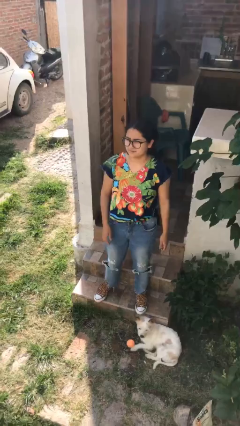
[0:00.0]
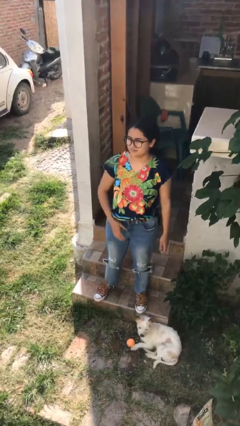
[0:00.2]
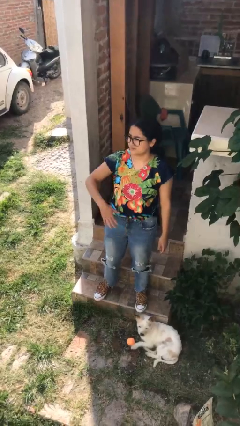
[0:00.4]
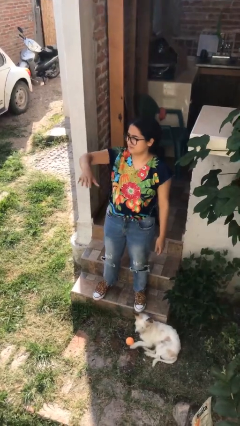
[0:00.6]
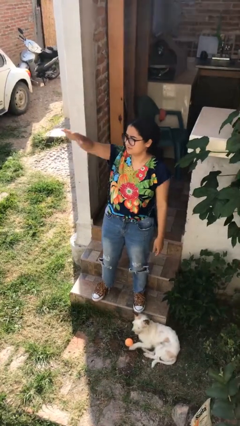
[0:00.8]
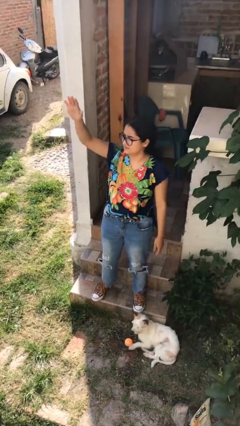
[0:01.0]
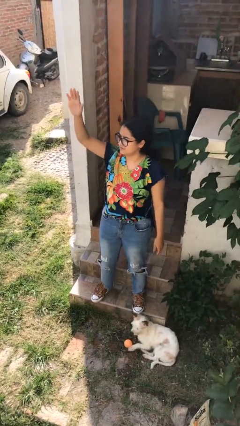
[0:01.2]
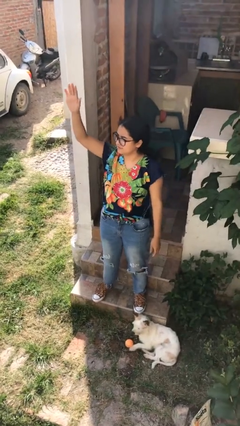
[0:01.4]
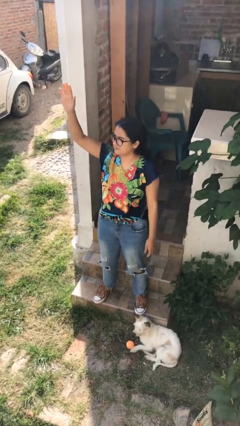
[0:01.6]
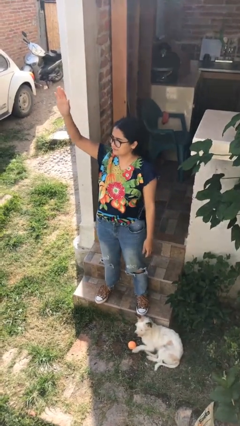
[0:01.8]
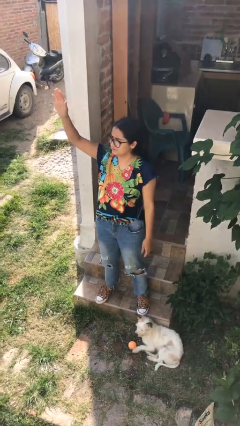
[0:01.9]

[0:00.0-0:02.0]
person gestures swipe up

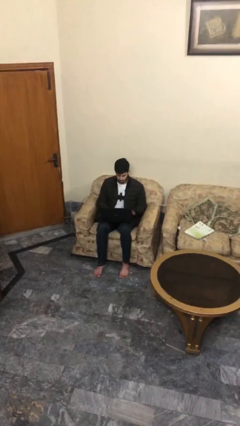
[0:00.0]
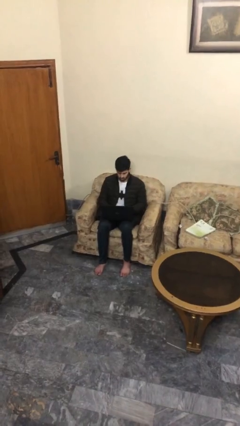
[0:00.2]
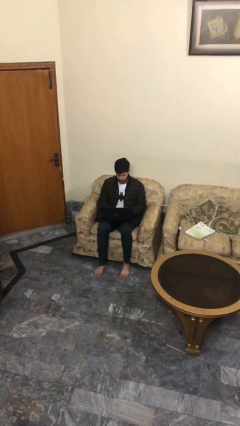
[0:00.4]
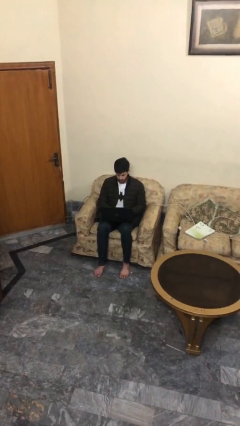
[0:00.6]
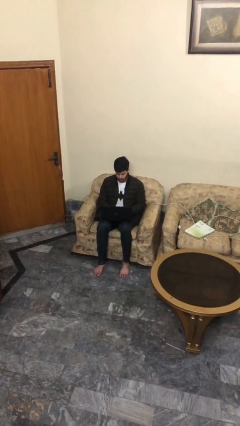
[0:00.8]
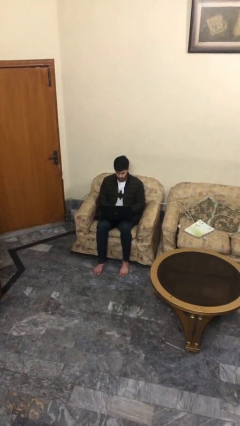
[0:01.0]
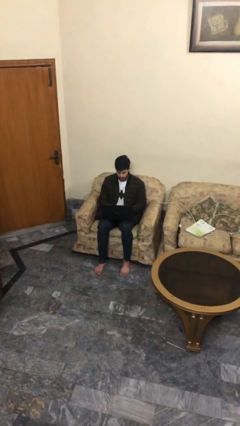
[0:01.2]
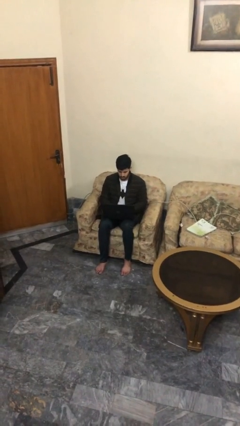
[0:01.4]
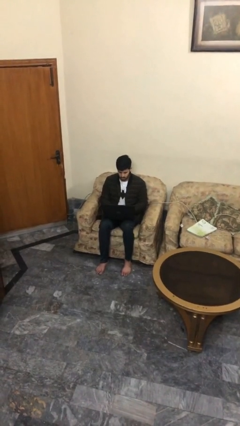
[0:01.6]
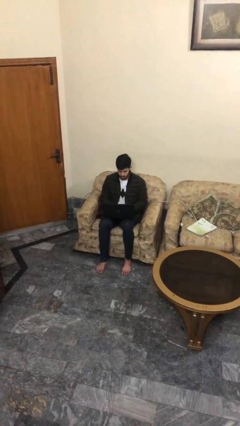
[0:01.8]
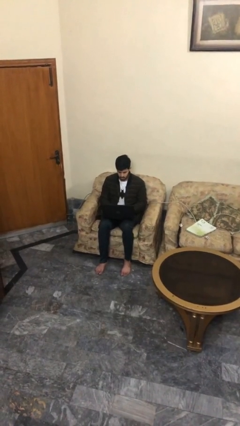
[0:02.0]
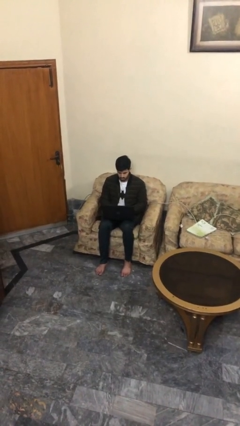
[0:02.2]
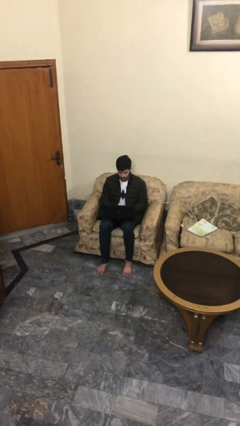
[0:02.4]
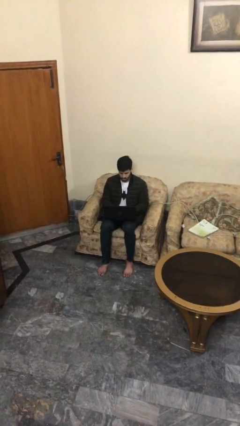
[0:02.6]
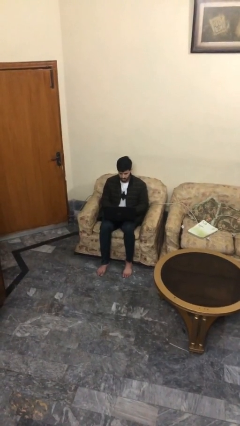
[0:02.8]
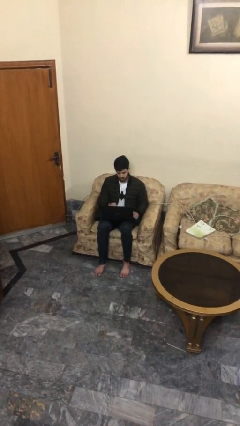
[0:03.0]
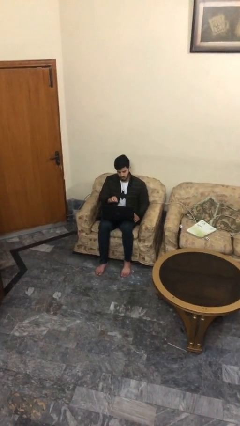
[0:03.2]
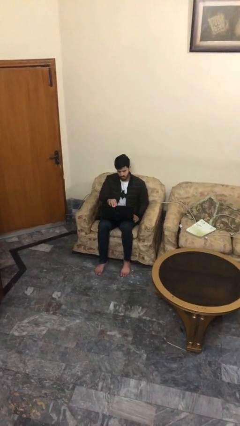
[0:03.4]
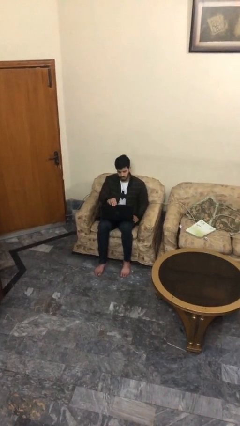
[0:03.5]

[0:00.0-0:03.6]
person interacts with laptop

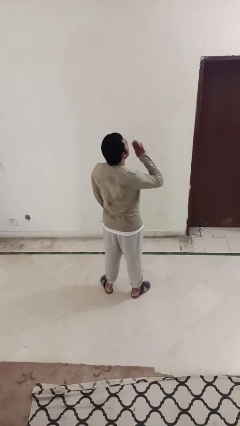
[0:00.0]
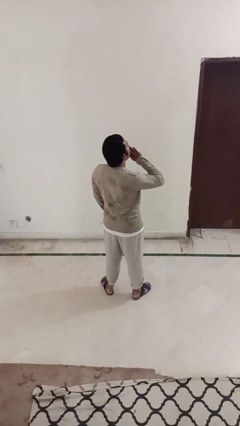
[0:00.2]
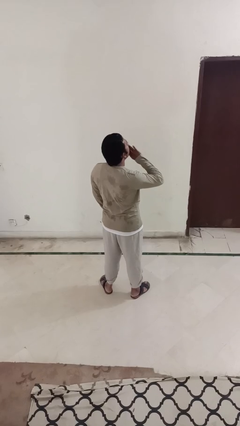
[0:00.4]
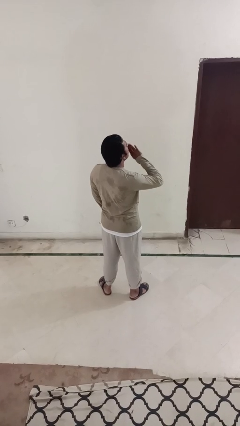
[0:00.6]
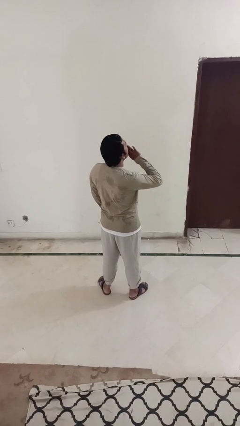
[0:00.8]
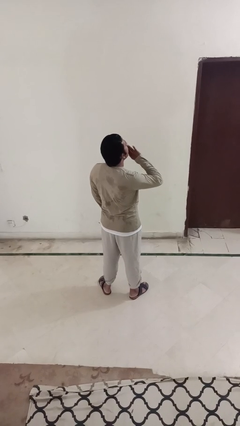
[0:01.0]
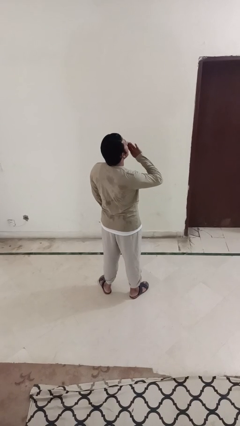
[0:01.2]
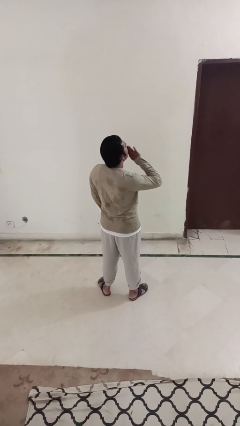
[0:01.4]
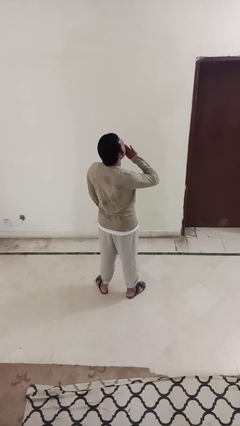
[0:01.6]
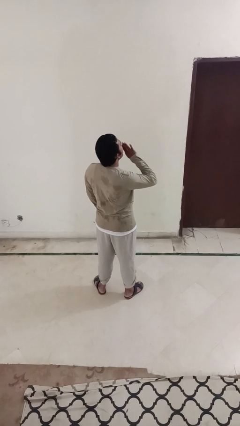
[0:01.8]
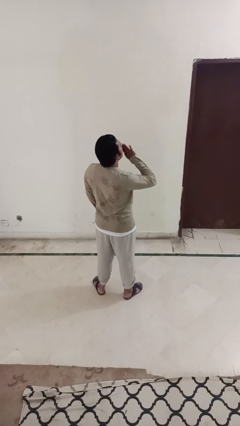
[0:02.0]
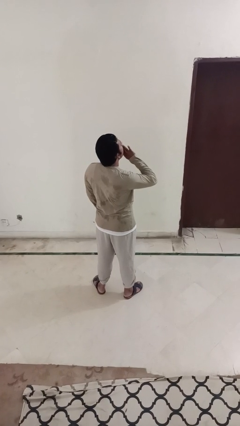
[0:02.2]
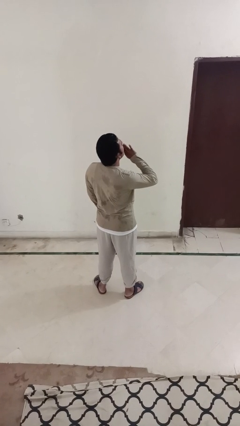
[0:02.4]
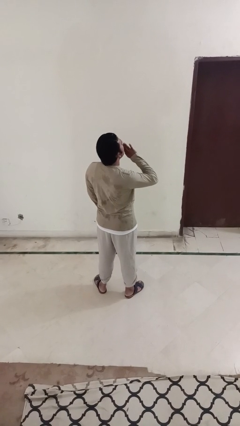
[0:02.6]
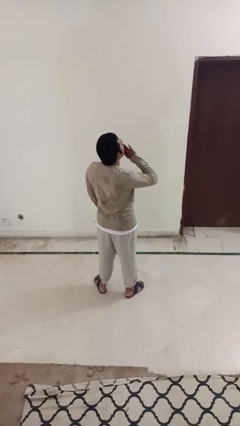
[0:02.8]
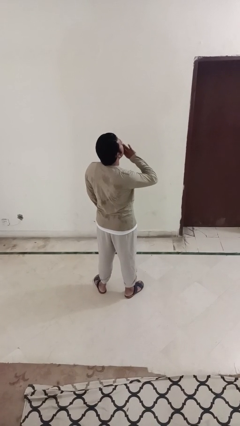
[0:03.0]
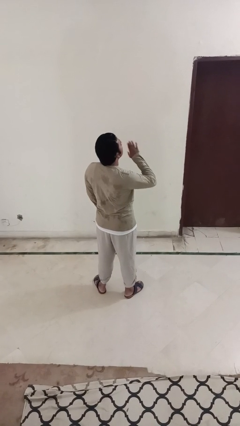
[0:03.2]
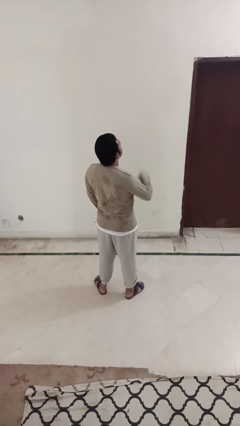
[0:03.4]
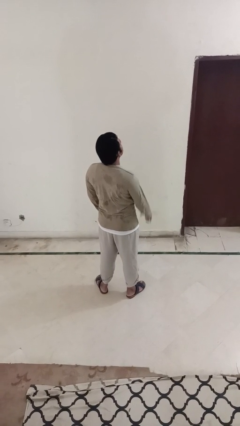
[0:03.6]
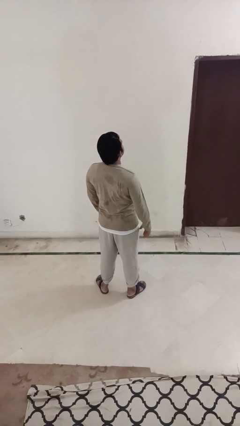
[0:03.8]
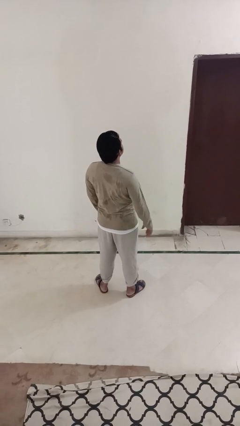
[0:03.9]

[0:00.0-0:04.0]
person yawns

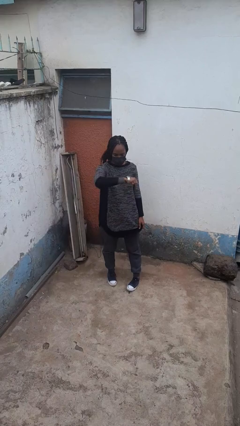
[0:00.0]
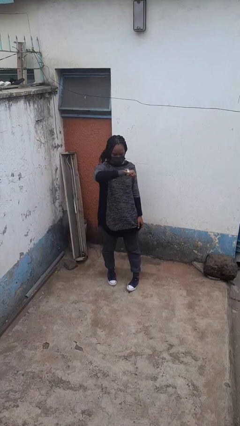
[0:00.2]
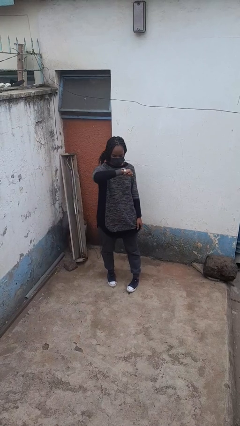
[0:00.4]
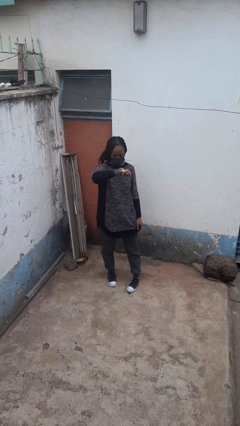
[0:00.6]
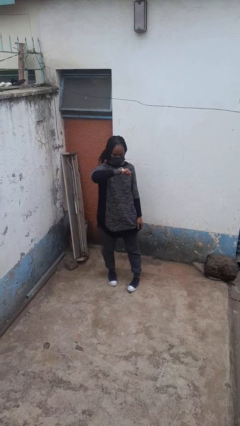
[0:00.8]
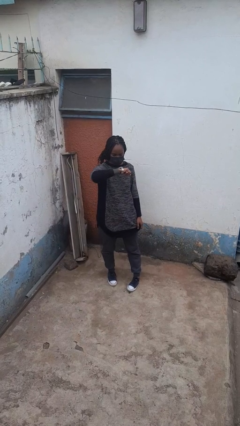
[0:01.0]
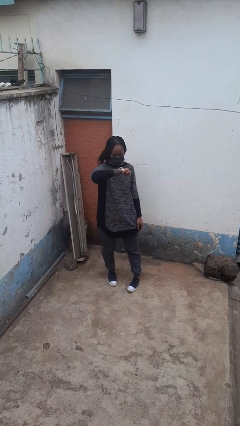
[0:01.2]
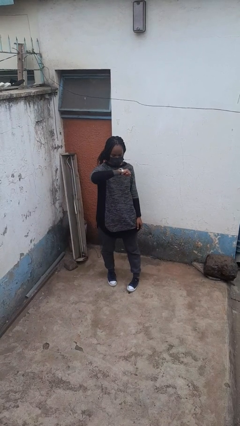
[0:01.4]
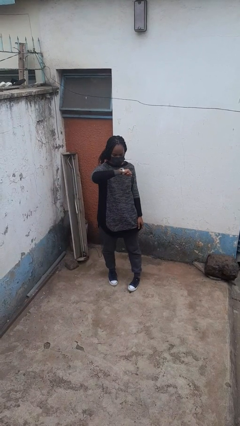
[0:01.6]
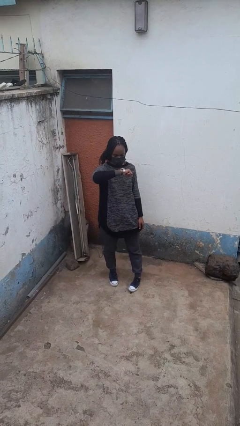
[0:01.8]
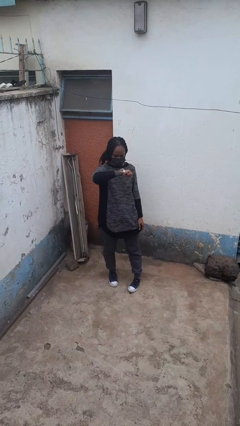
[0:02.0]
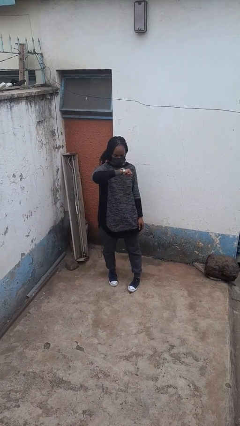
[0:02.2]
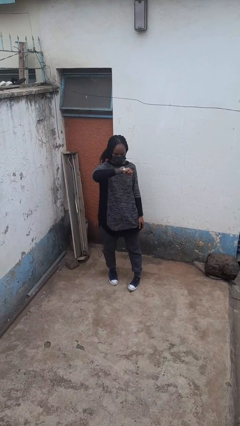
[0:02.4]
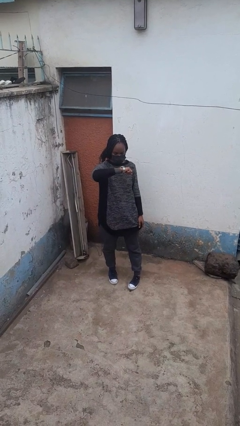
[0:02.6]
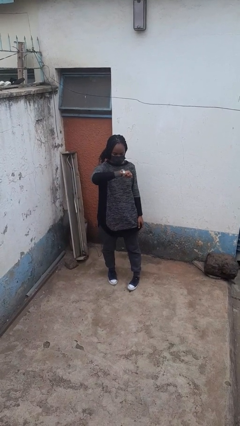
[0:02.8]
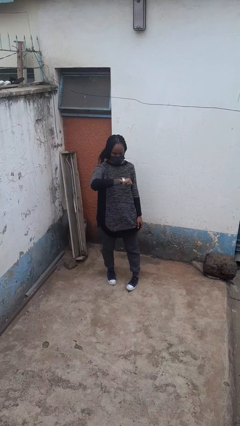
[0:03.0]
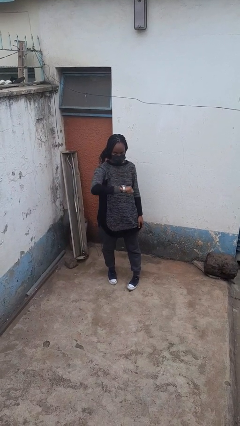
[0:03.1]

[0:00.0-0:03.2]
person looks at wristwatch

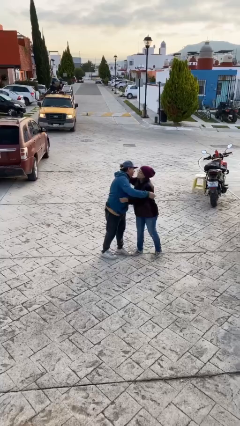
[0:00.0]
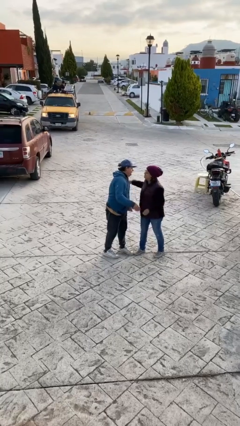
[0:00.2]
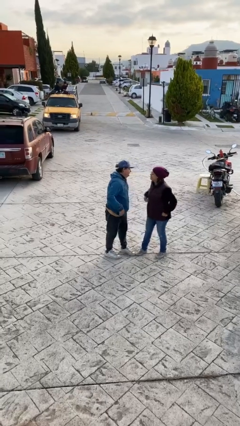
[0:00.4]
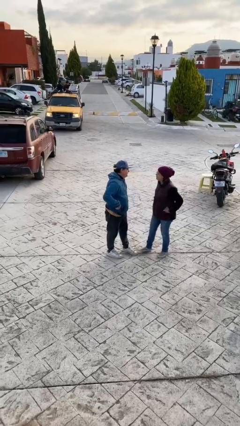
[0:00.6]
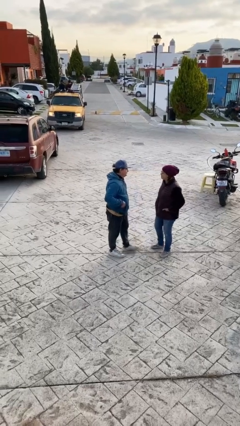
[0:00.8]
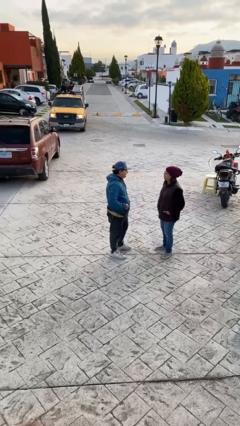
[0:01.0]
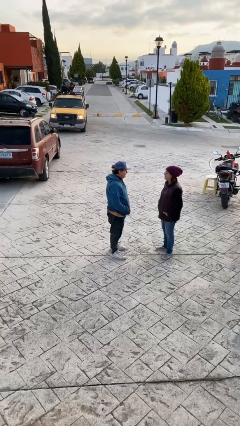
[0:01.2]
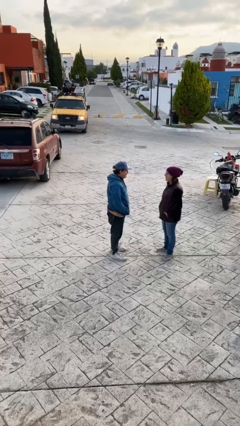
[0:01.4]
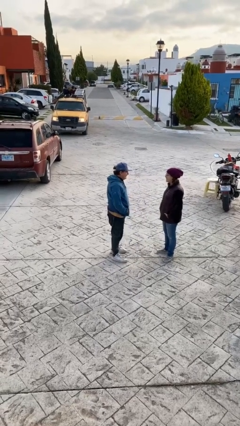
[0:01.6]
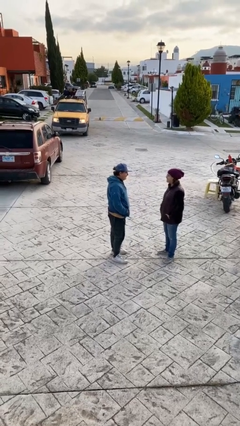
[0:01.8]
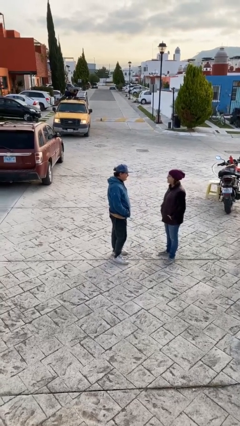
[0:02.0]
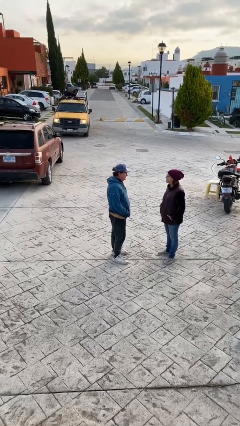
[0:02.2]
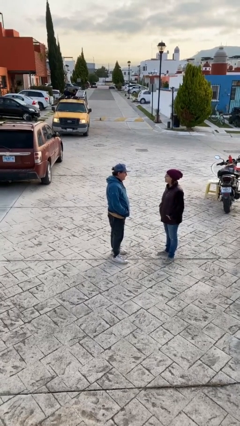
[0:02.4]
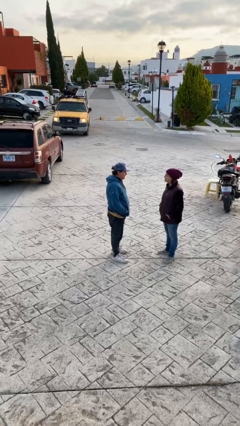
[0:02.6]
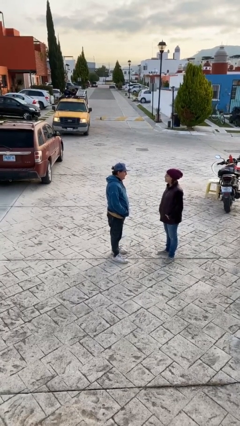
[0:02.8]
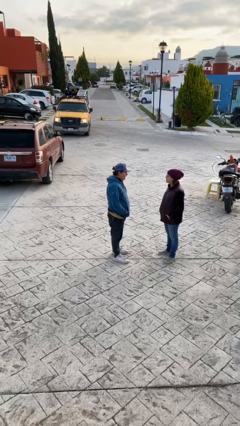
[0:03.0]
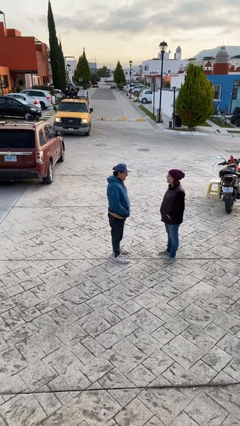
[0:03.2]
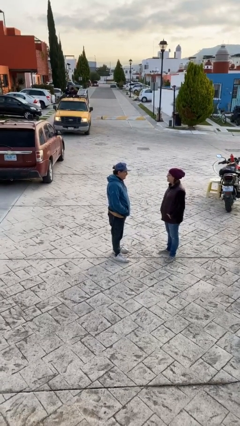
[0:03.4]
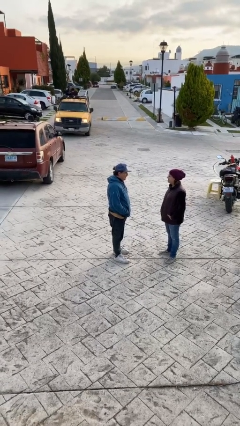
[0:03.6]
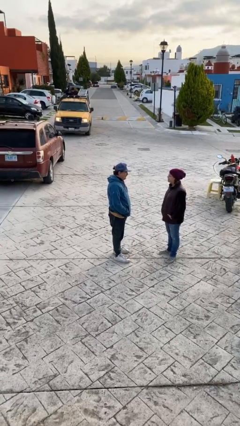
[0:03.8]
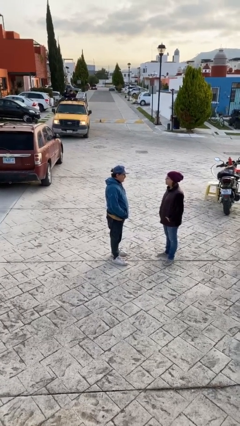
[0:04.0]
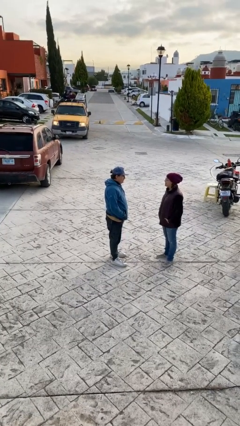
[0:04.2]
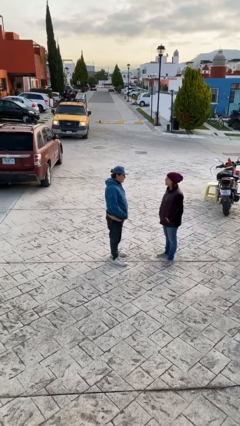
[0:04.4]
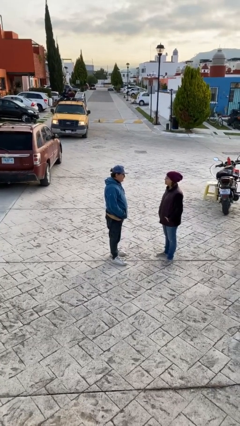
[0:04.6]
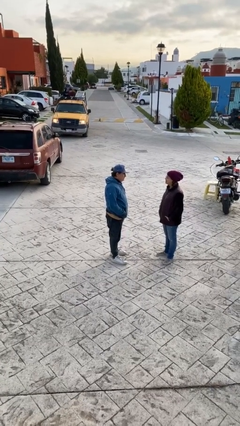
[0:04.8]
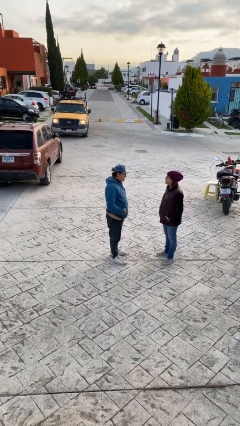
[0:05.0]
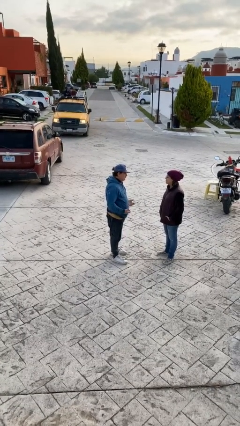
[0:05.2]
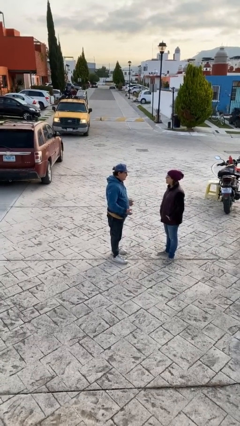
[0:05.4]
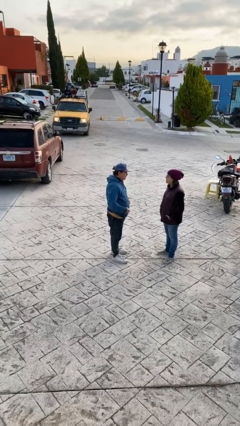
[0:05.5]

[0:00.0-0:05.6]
person talks to person
